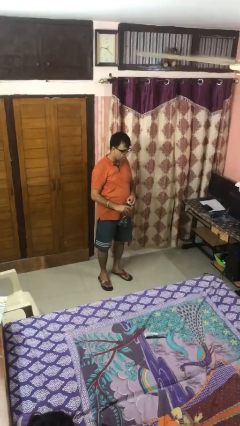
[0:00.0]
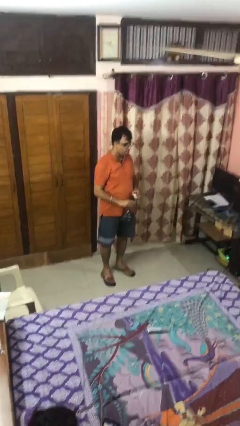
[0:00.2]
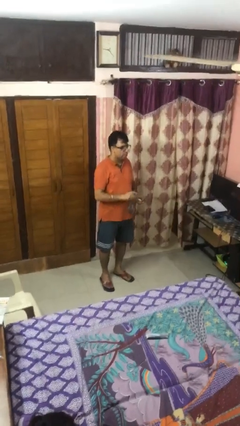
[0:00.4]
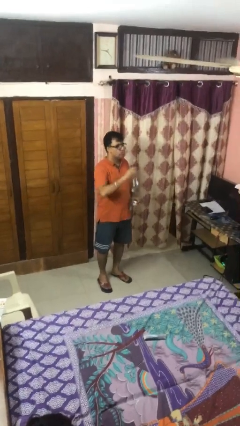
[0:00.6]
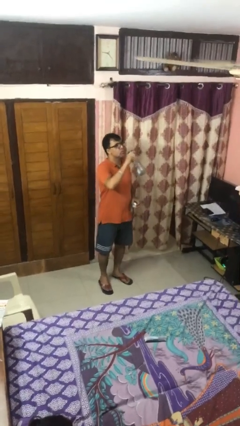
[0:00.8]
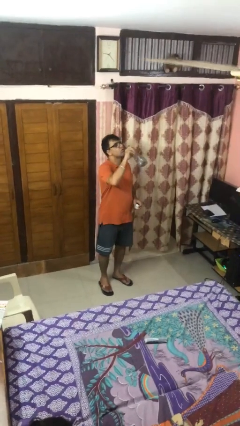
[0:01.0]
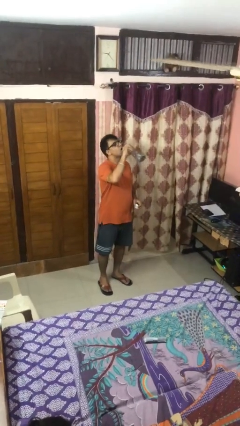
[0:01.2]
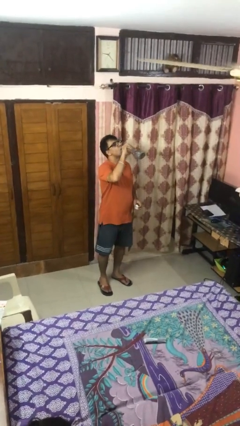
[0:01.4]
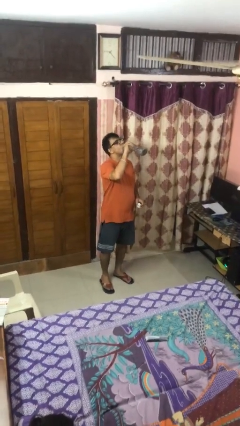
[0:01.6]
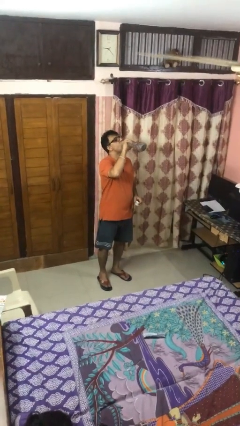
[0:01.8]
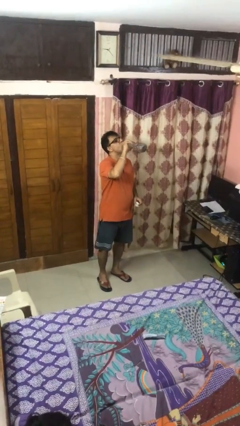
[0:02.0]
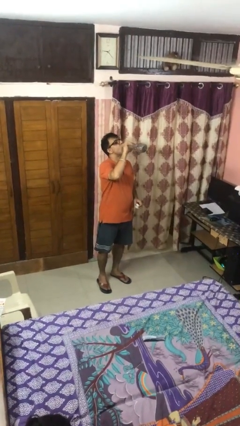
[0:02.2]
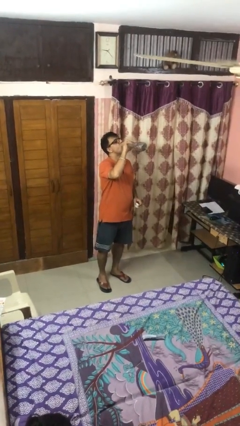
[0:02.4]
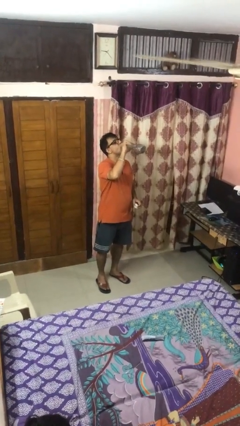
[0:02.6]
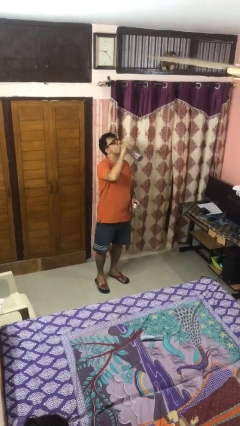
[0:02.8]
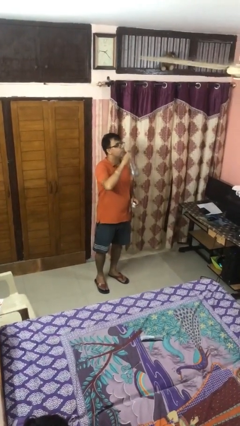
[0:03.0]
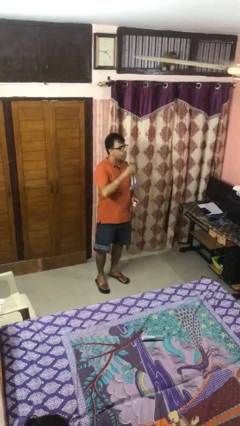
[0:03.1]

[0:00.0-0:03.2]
person drinks from bottle

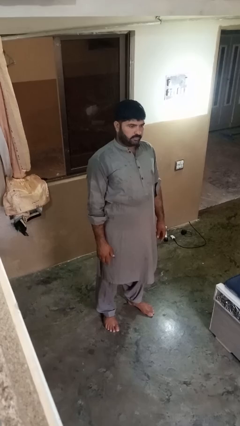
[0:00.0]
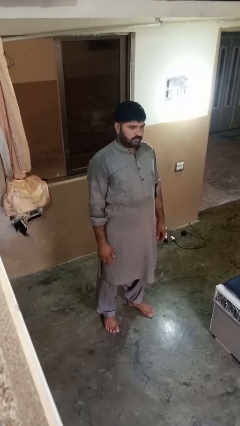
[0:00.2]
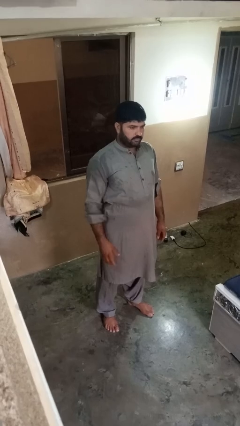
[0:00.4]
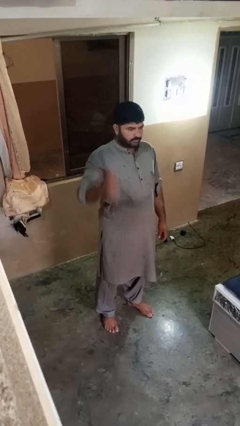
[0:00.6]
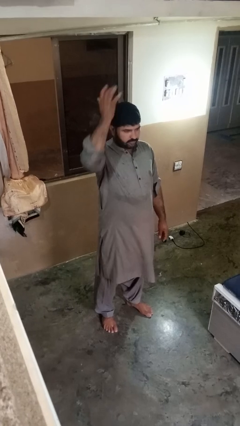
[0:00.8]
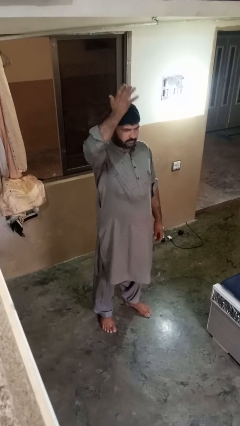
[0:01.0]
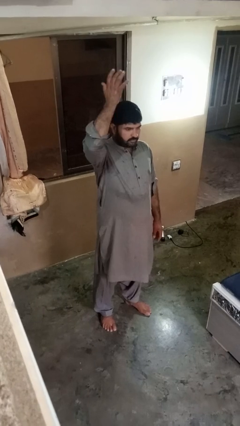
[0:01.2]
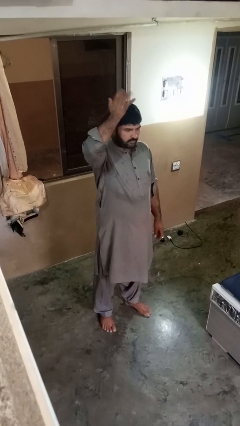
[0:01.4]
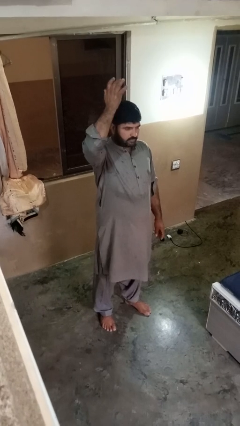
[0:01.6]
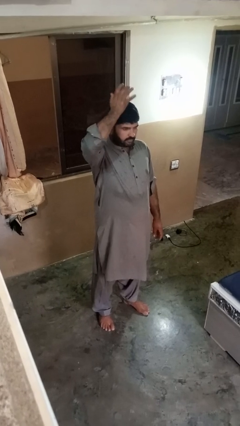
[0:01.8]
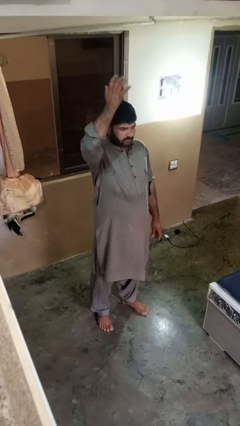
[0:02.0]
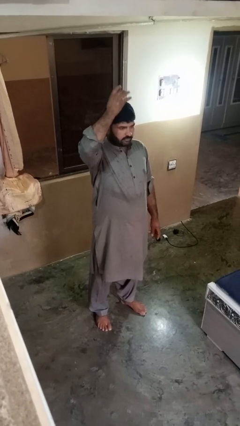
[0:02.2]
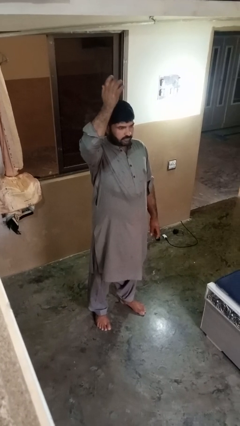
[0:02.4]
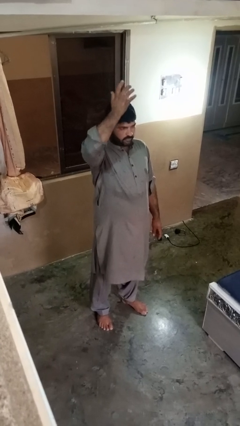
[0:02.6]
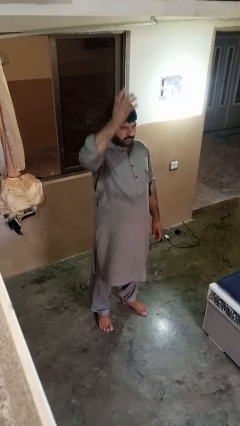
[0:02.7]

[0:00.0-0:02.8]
person pats head

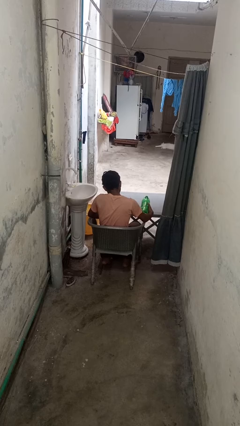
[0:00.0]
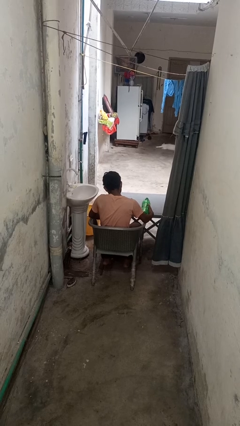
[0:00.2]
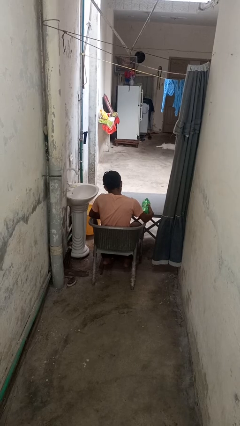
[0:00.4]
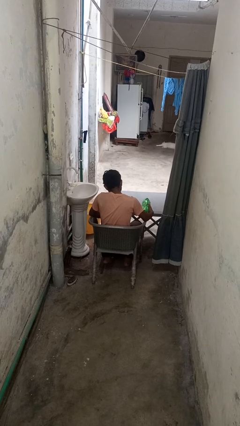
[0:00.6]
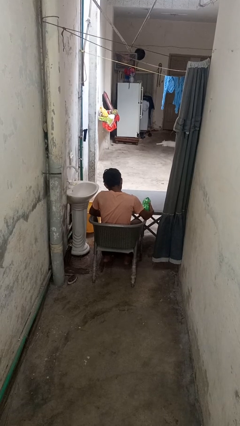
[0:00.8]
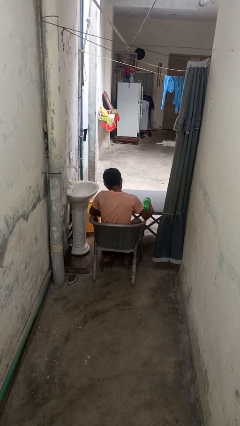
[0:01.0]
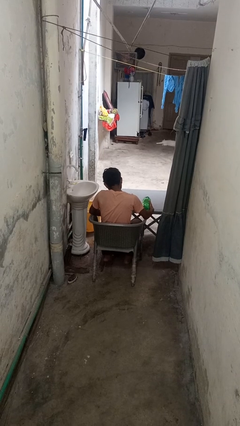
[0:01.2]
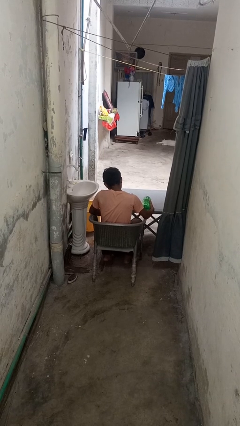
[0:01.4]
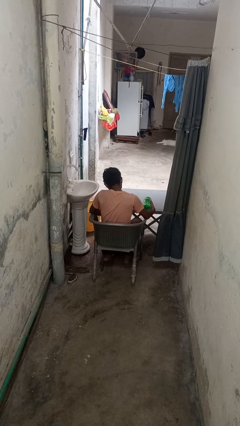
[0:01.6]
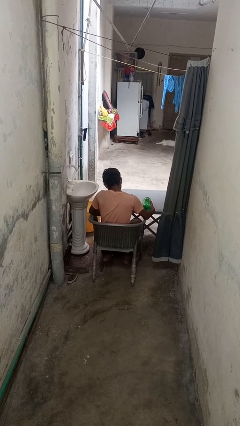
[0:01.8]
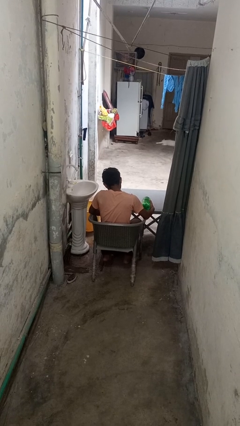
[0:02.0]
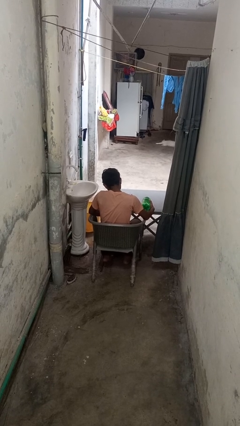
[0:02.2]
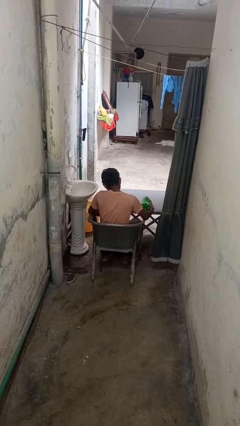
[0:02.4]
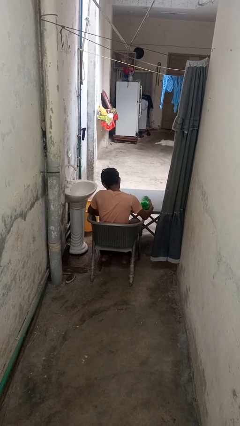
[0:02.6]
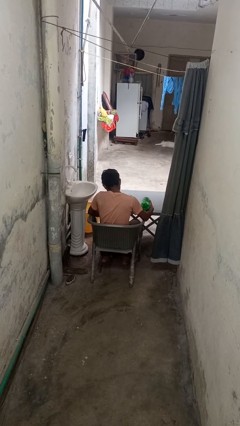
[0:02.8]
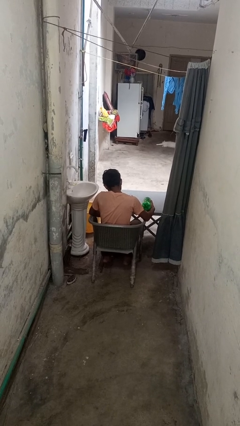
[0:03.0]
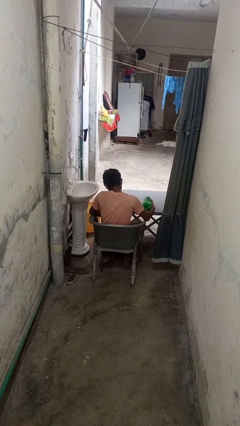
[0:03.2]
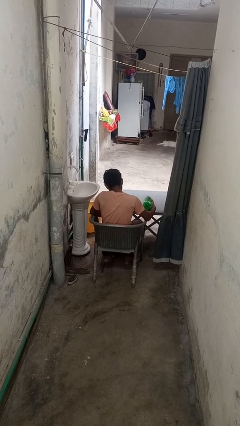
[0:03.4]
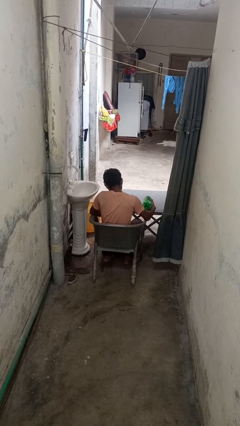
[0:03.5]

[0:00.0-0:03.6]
person pours liquid into cup

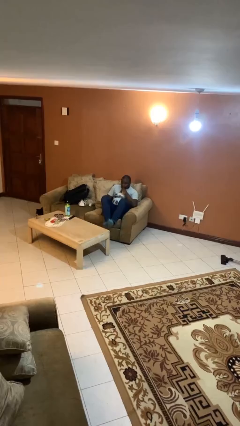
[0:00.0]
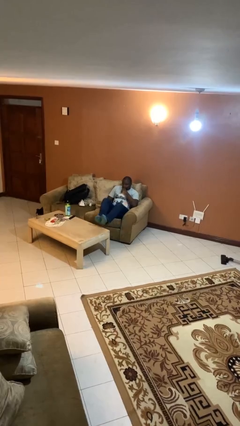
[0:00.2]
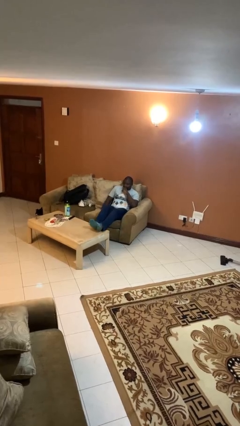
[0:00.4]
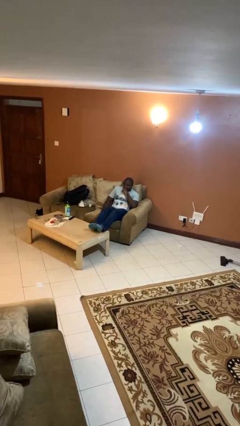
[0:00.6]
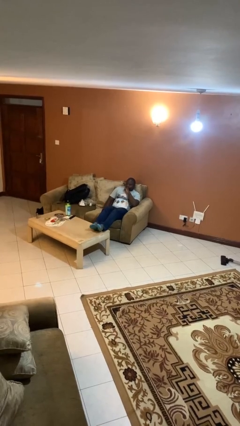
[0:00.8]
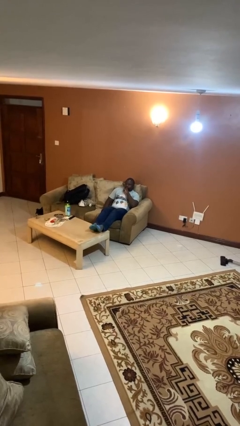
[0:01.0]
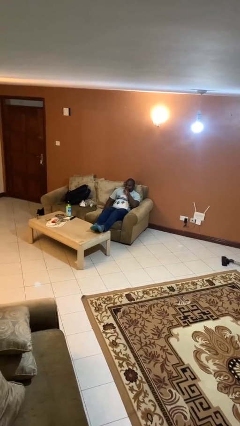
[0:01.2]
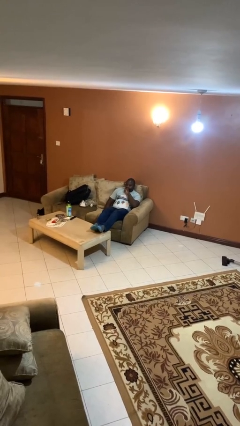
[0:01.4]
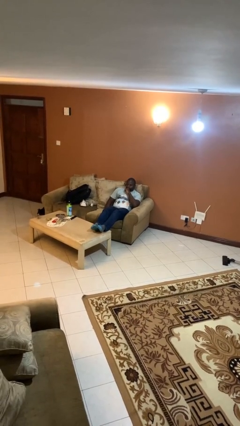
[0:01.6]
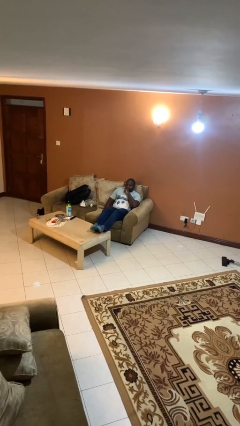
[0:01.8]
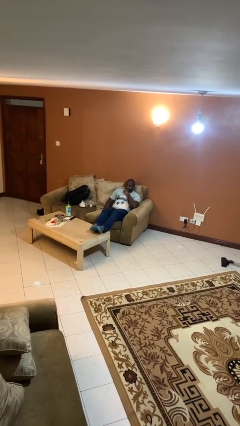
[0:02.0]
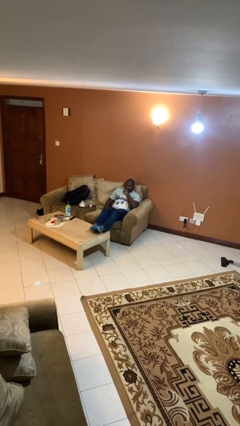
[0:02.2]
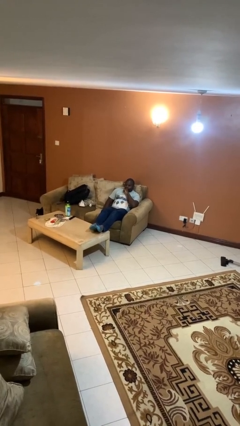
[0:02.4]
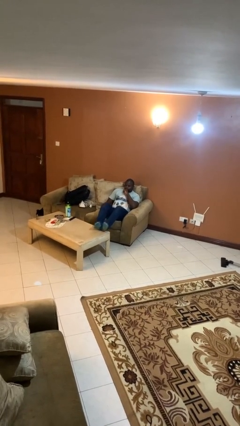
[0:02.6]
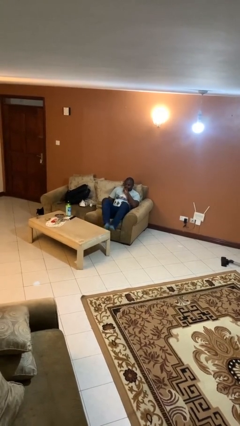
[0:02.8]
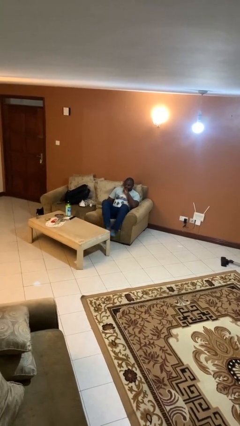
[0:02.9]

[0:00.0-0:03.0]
person puts feet up

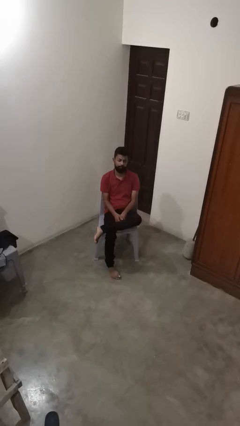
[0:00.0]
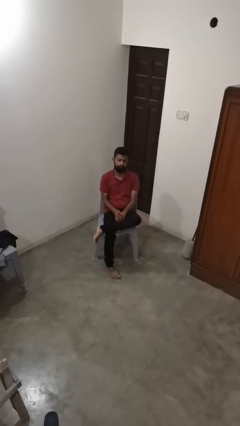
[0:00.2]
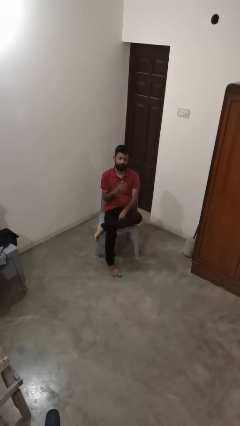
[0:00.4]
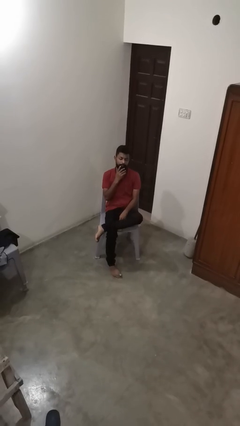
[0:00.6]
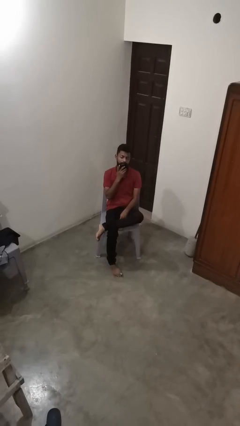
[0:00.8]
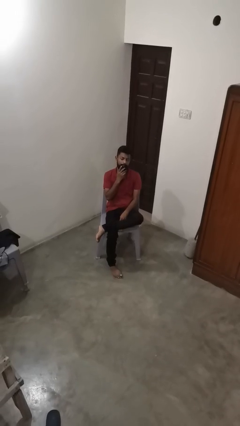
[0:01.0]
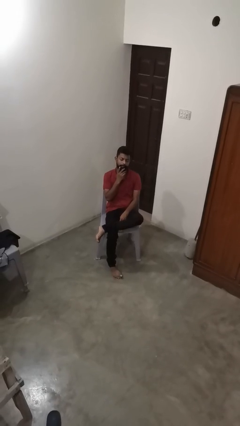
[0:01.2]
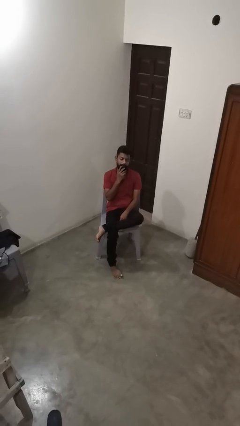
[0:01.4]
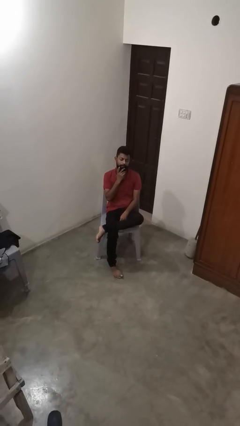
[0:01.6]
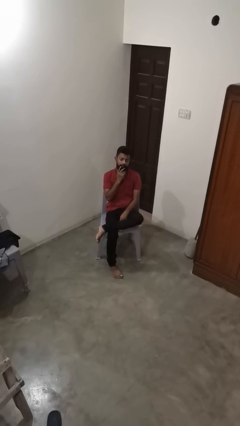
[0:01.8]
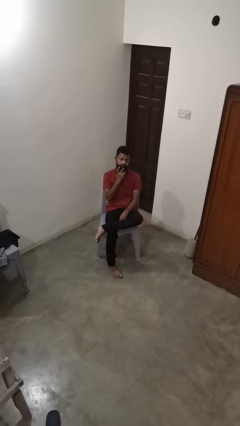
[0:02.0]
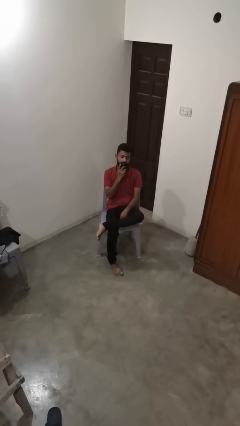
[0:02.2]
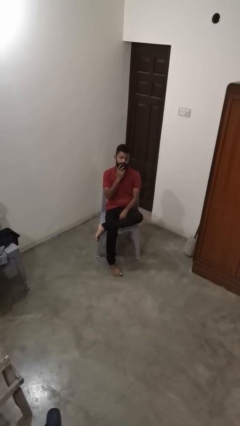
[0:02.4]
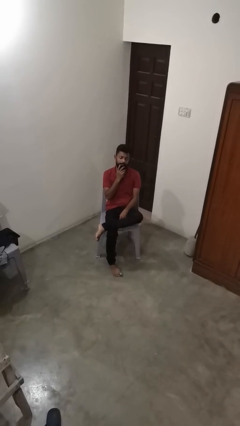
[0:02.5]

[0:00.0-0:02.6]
person strokes chin

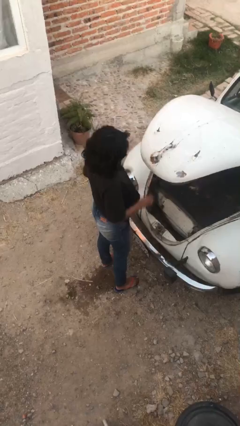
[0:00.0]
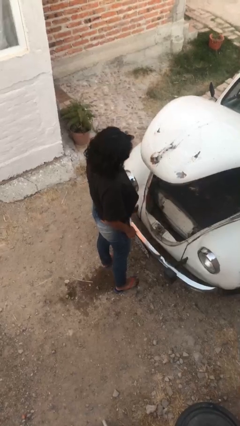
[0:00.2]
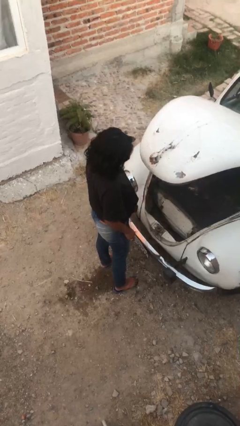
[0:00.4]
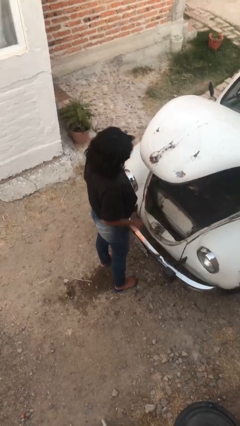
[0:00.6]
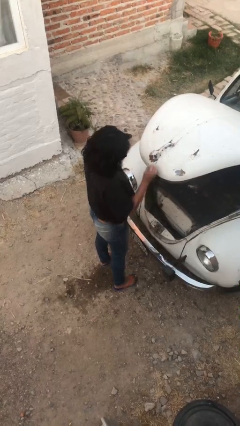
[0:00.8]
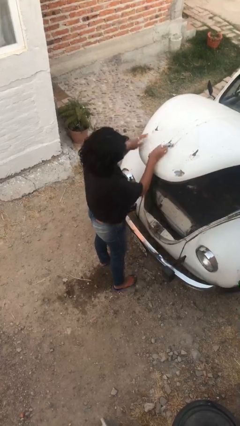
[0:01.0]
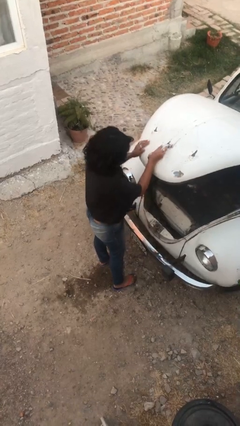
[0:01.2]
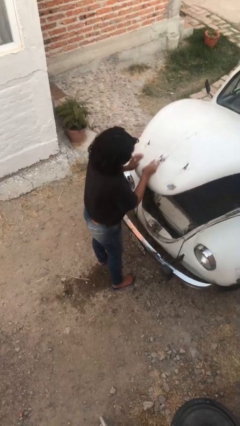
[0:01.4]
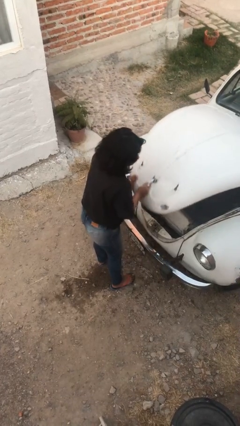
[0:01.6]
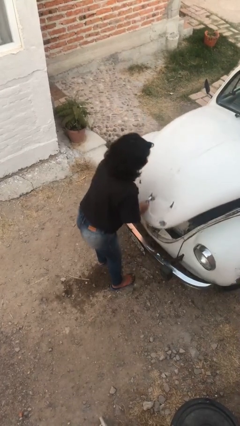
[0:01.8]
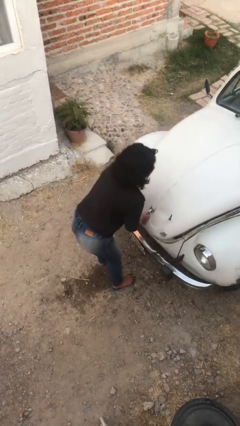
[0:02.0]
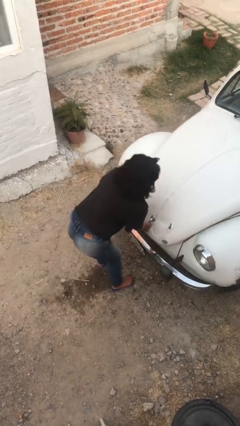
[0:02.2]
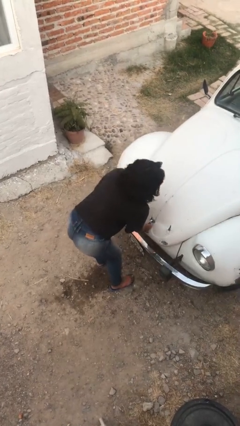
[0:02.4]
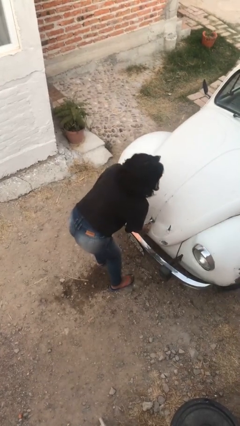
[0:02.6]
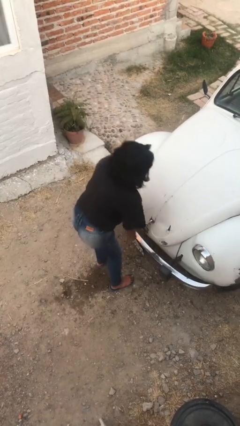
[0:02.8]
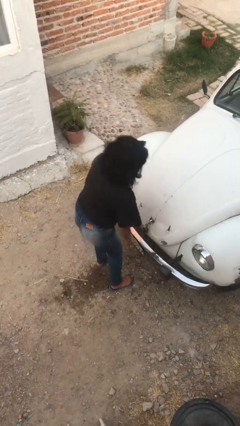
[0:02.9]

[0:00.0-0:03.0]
person closes car trunk
